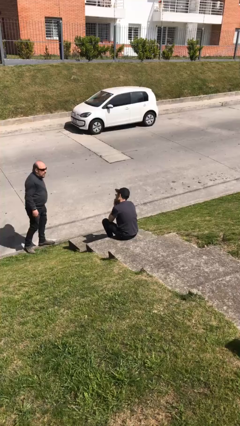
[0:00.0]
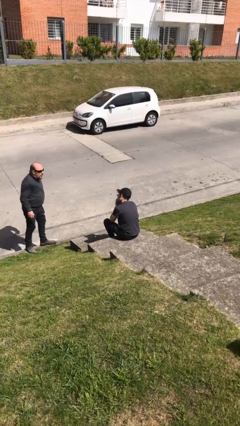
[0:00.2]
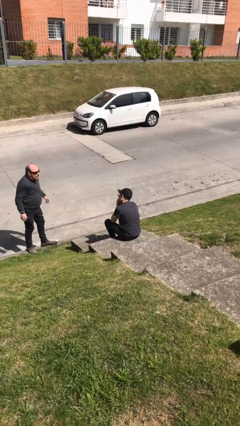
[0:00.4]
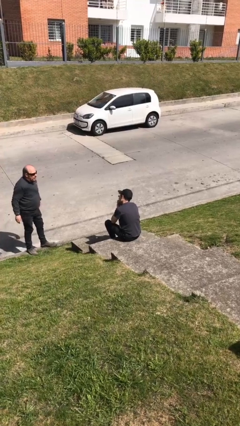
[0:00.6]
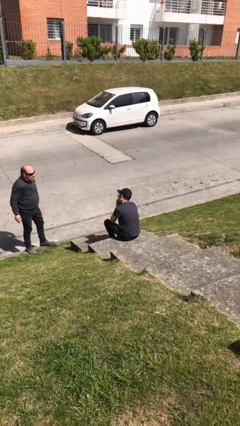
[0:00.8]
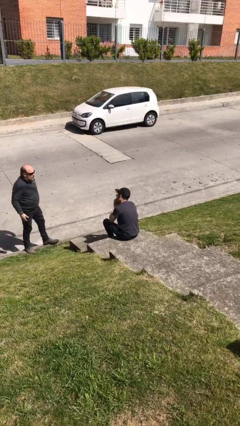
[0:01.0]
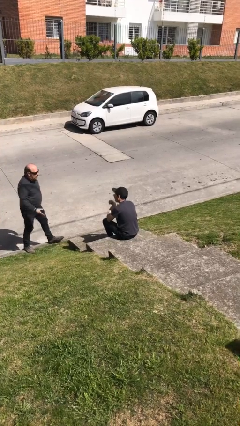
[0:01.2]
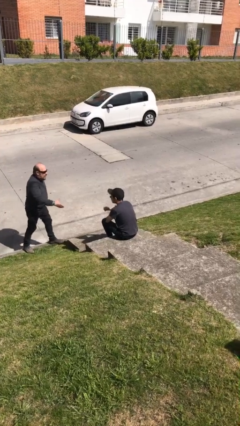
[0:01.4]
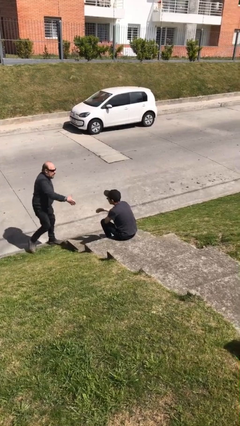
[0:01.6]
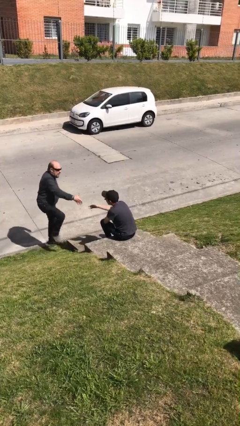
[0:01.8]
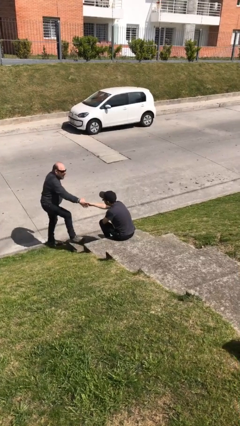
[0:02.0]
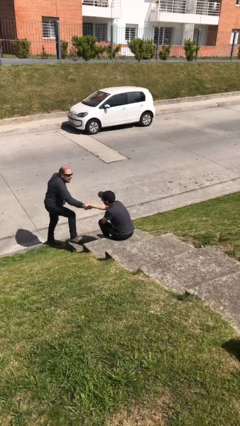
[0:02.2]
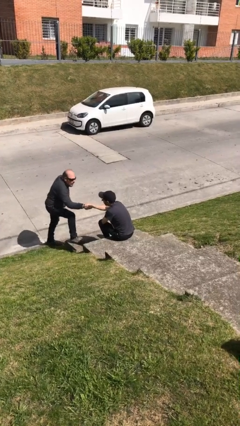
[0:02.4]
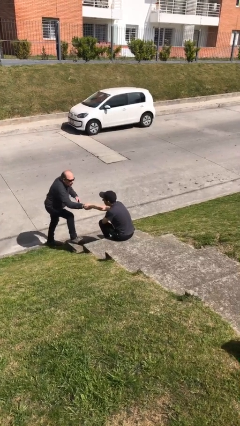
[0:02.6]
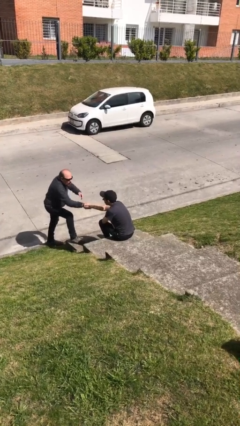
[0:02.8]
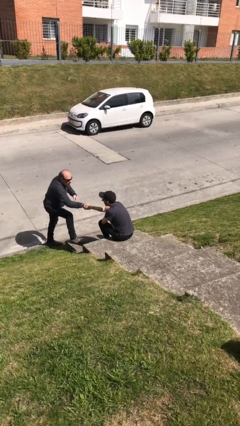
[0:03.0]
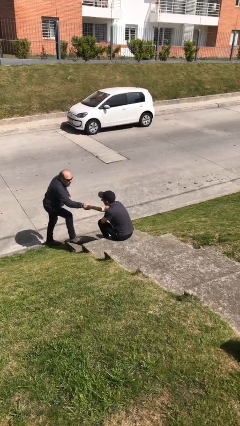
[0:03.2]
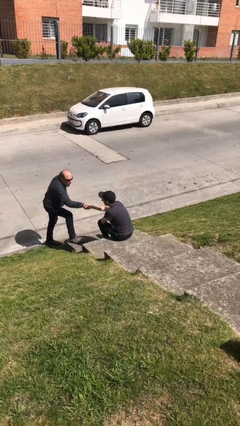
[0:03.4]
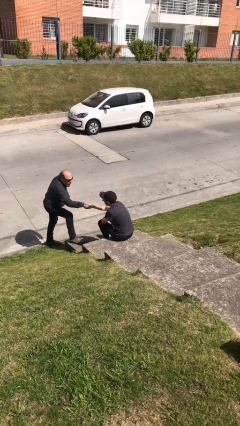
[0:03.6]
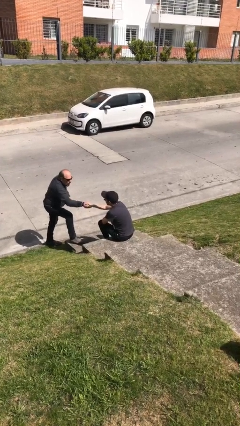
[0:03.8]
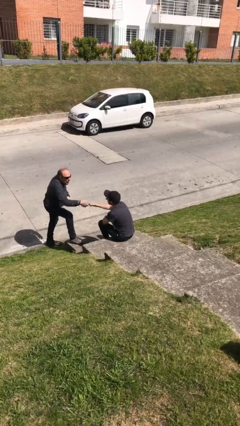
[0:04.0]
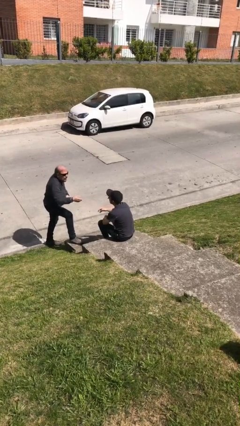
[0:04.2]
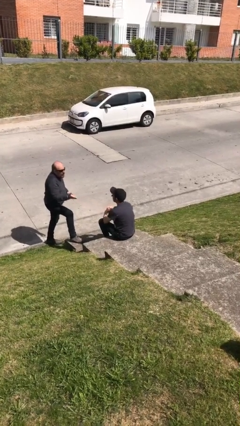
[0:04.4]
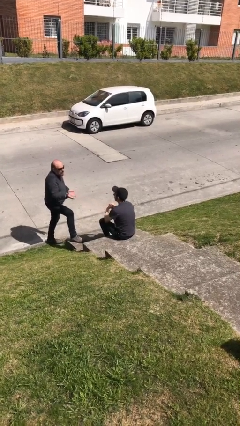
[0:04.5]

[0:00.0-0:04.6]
person shakes hand

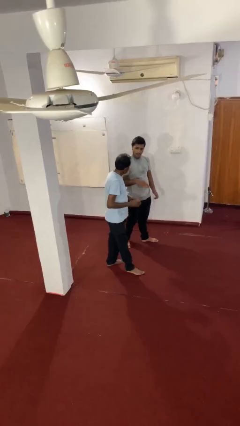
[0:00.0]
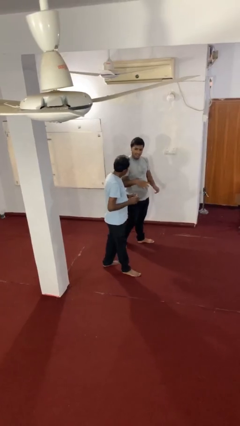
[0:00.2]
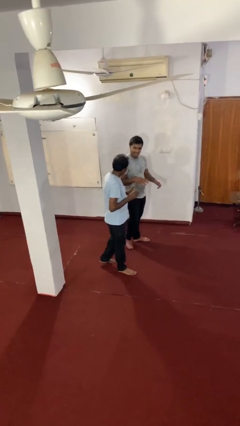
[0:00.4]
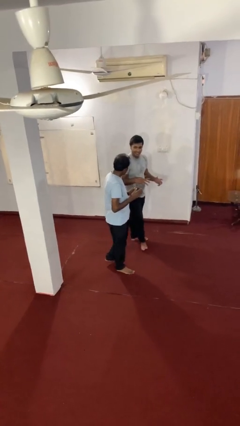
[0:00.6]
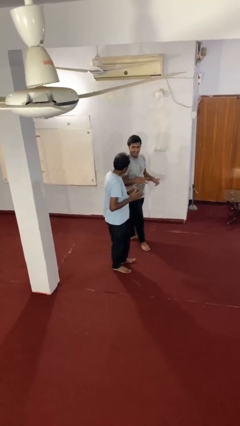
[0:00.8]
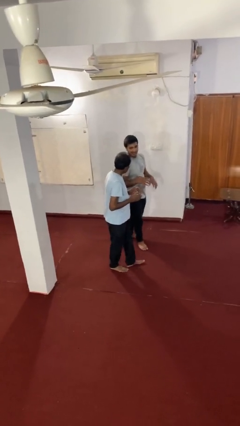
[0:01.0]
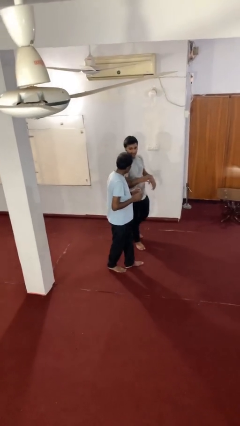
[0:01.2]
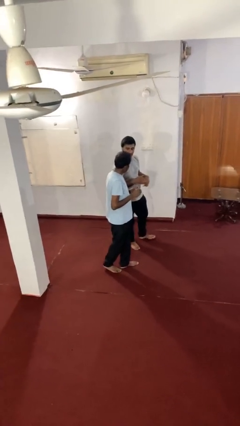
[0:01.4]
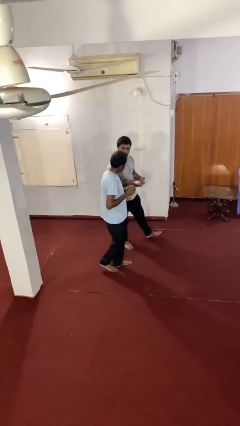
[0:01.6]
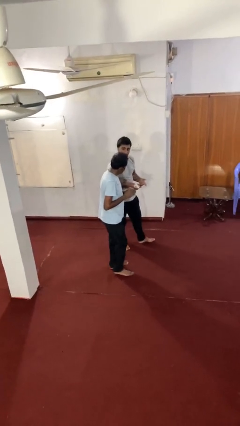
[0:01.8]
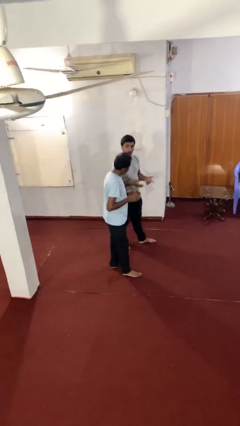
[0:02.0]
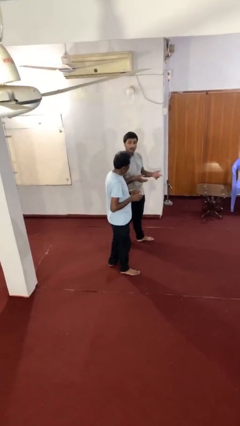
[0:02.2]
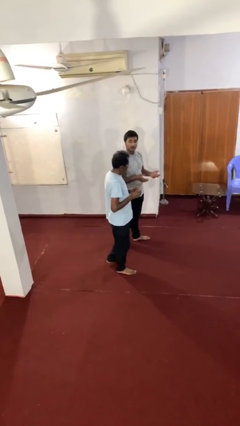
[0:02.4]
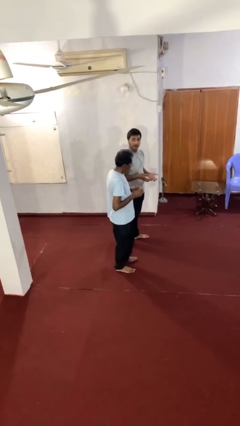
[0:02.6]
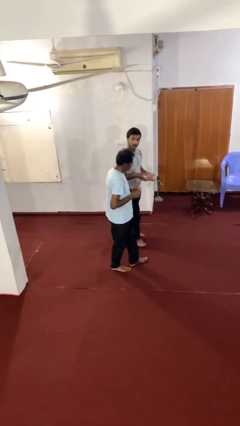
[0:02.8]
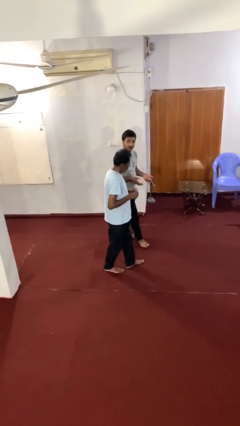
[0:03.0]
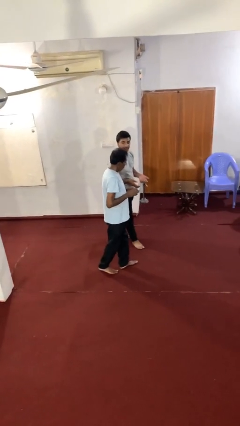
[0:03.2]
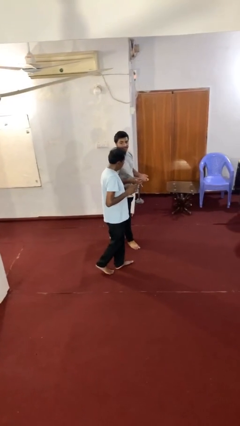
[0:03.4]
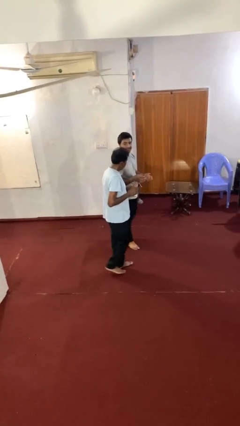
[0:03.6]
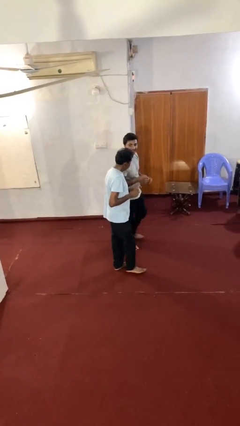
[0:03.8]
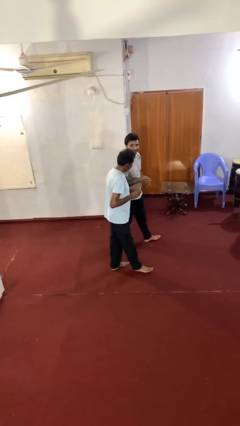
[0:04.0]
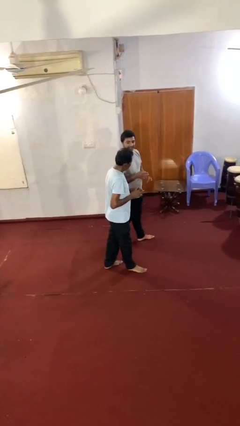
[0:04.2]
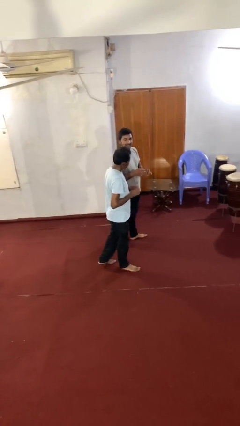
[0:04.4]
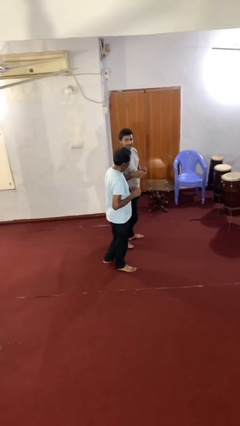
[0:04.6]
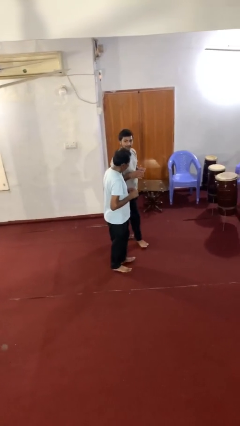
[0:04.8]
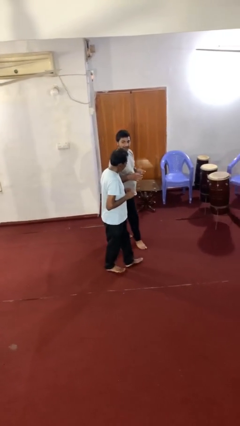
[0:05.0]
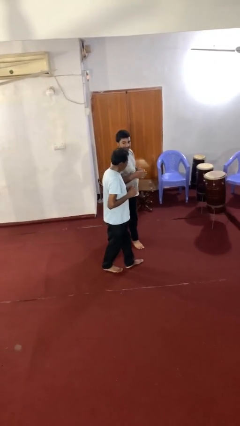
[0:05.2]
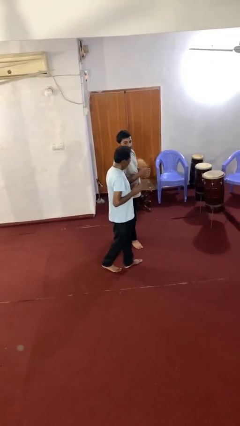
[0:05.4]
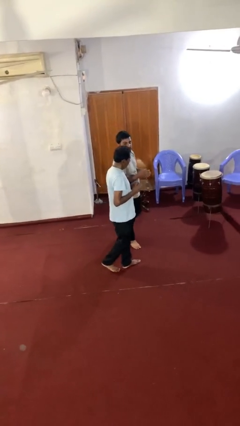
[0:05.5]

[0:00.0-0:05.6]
person talks to person

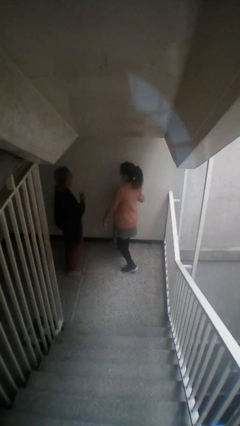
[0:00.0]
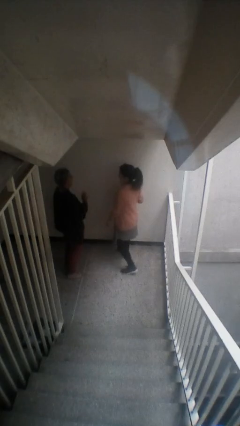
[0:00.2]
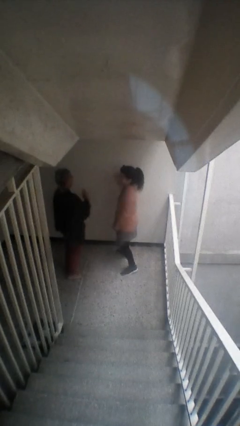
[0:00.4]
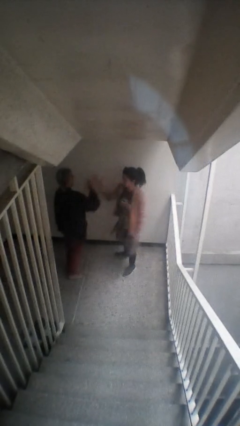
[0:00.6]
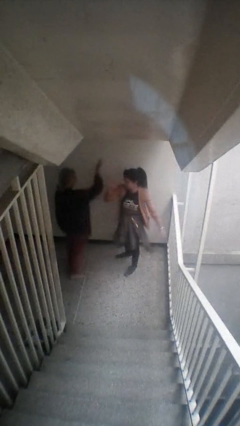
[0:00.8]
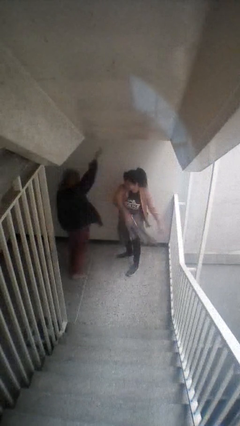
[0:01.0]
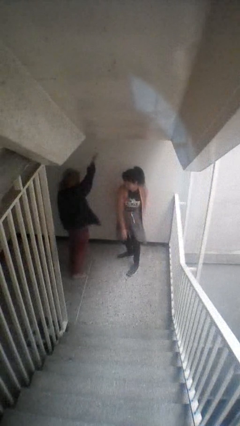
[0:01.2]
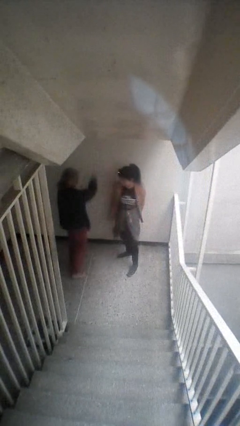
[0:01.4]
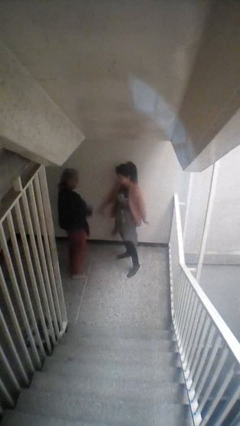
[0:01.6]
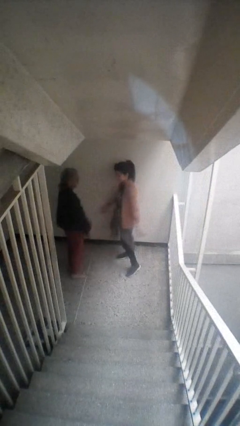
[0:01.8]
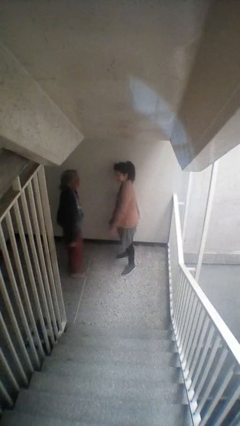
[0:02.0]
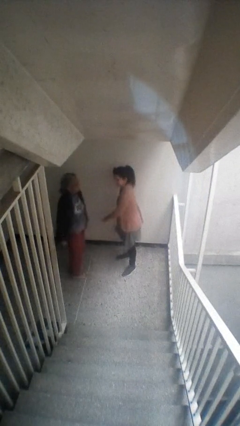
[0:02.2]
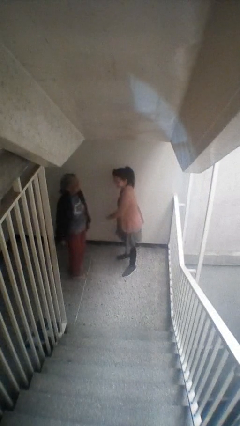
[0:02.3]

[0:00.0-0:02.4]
person highfives hand

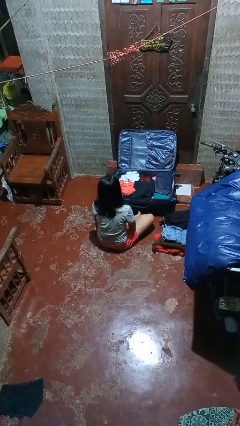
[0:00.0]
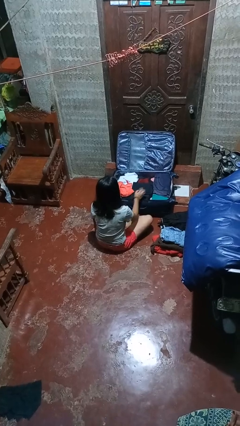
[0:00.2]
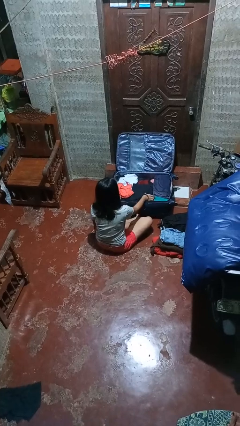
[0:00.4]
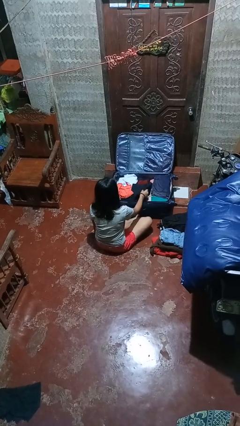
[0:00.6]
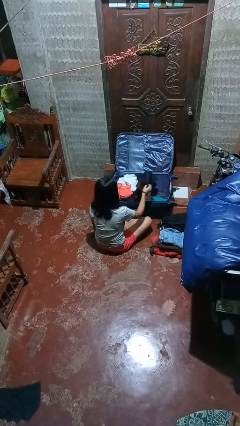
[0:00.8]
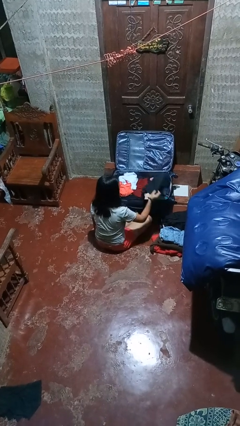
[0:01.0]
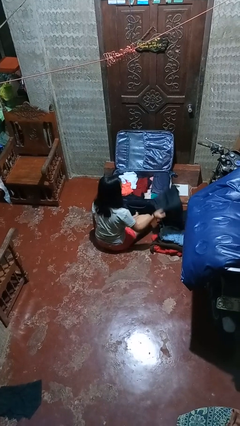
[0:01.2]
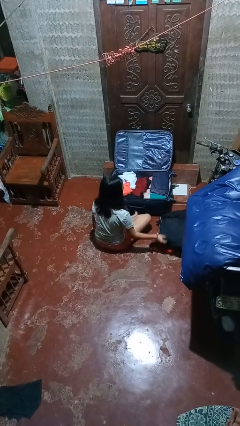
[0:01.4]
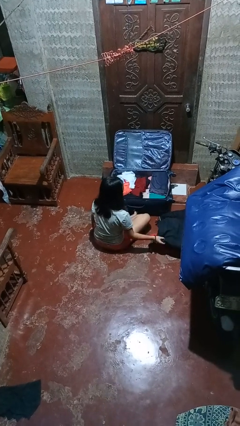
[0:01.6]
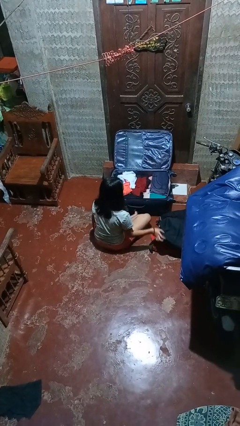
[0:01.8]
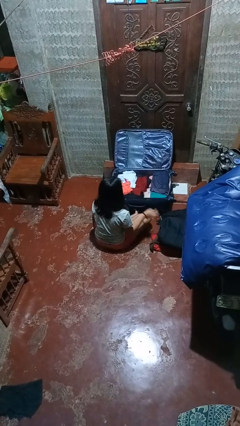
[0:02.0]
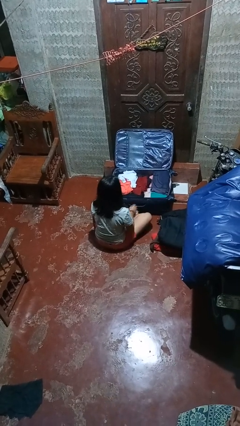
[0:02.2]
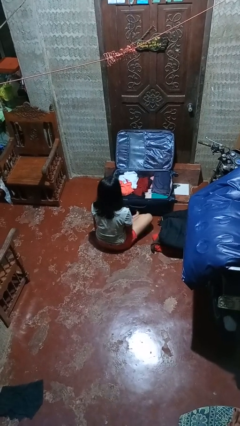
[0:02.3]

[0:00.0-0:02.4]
person unloads clothes from suitcase

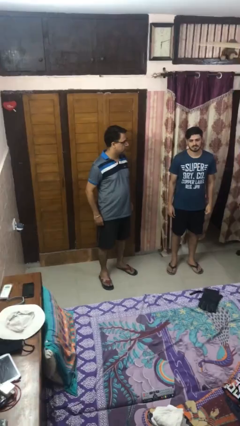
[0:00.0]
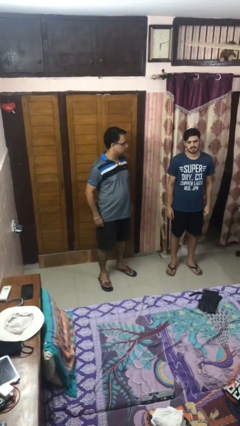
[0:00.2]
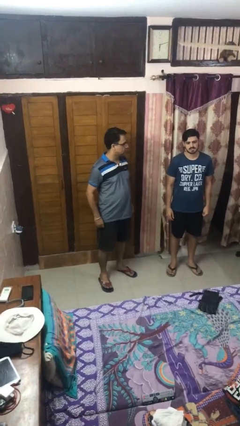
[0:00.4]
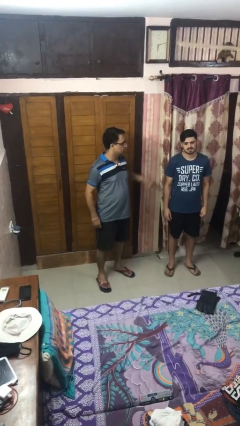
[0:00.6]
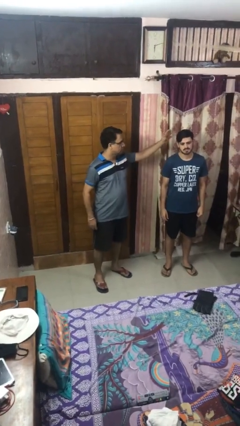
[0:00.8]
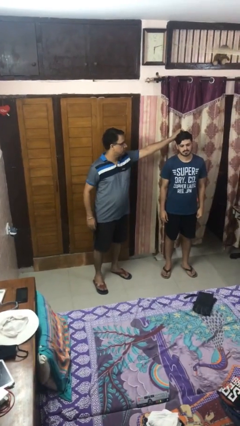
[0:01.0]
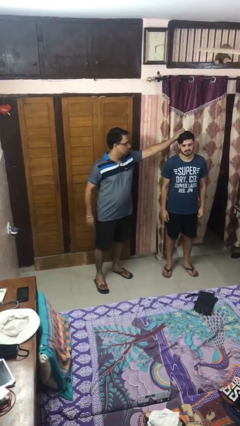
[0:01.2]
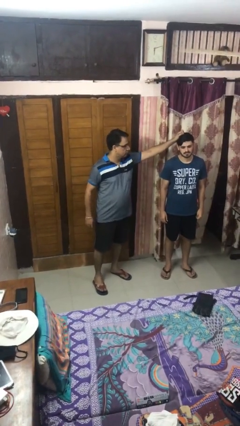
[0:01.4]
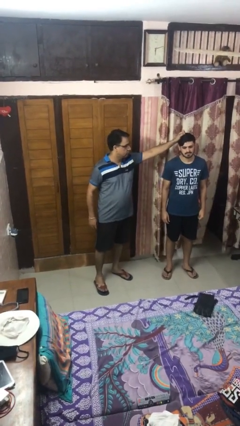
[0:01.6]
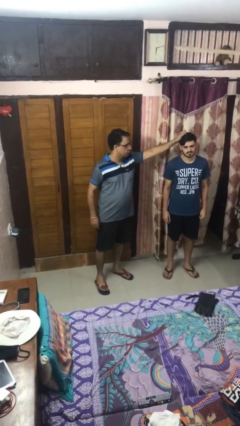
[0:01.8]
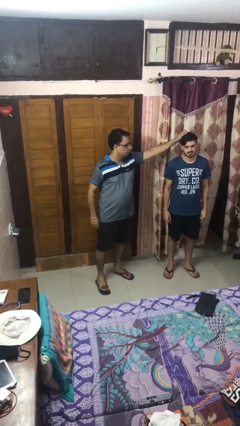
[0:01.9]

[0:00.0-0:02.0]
person grabs person by hair

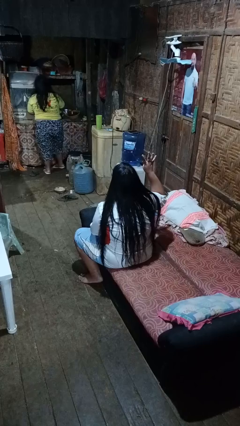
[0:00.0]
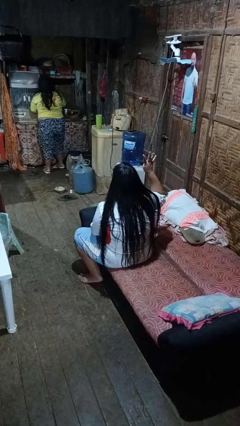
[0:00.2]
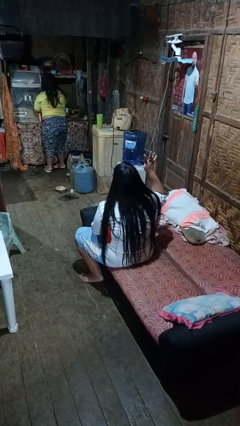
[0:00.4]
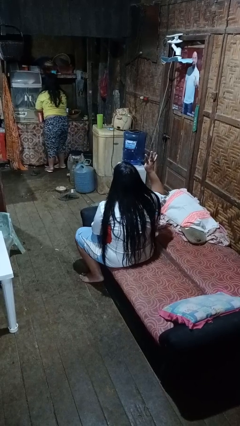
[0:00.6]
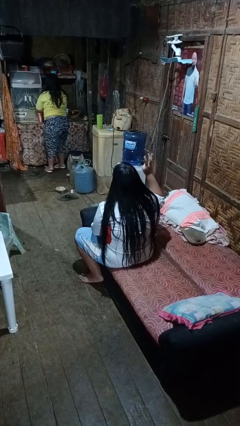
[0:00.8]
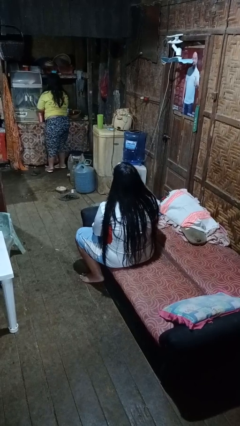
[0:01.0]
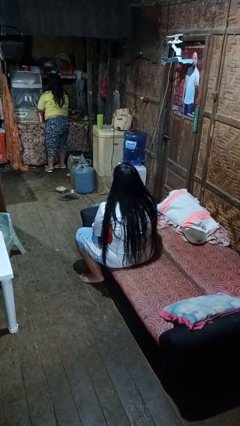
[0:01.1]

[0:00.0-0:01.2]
person gestures number four
